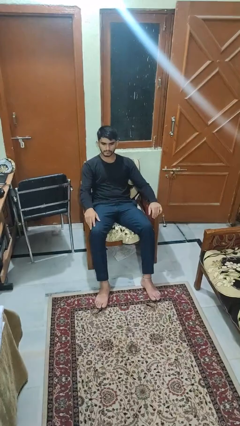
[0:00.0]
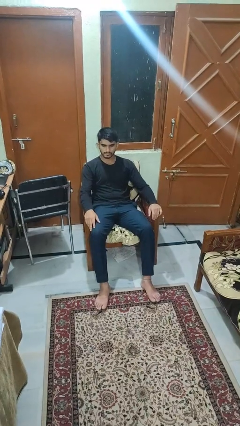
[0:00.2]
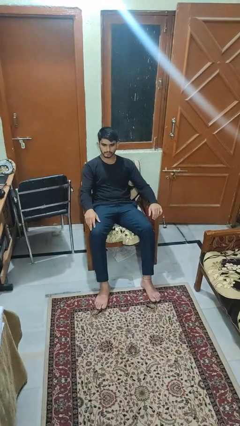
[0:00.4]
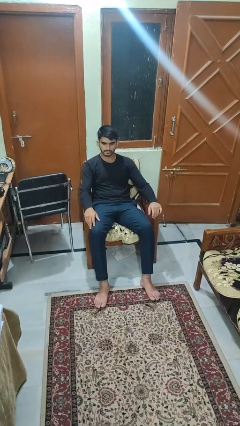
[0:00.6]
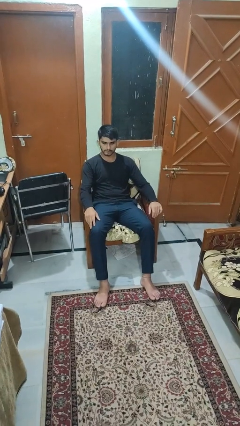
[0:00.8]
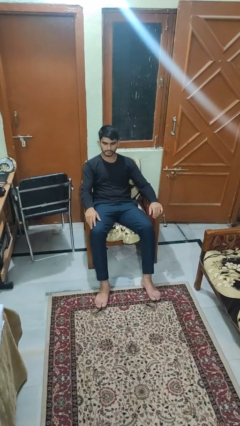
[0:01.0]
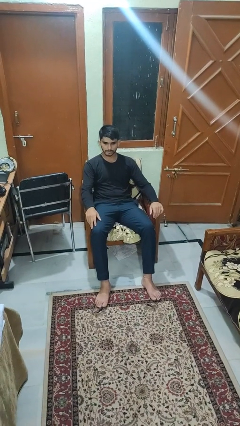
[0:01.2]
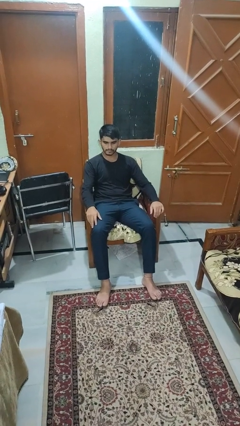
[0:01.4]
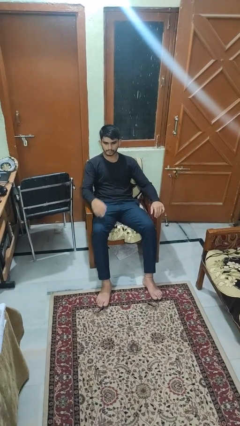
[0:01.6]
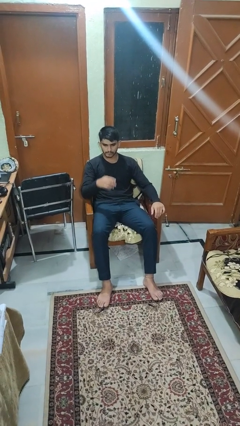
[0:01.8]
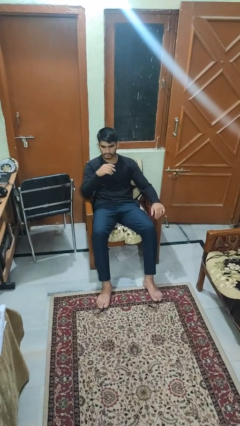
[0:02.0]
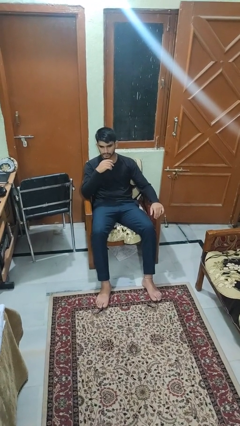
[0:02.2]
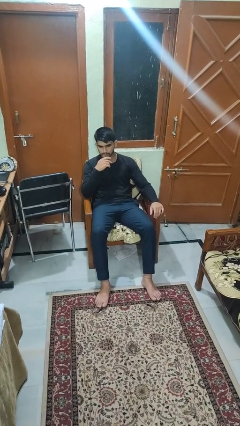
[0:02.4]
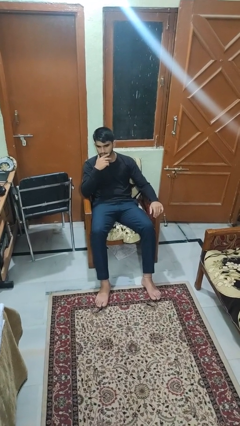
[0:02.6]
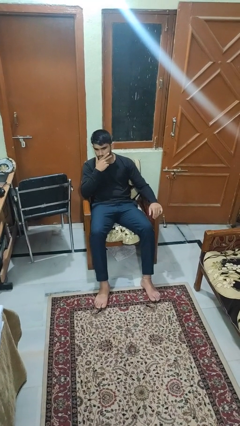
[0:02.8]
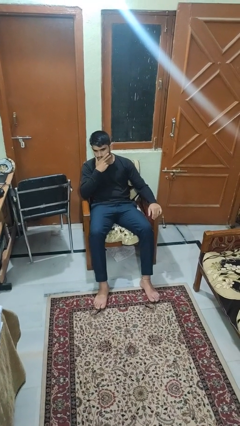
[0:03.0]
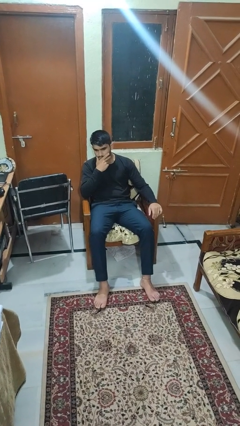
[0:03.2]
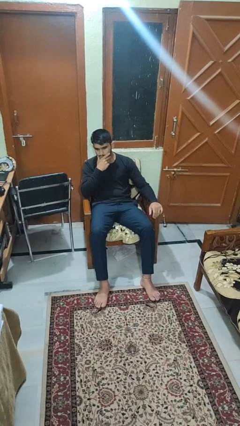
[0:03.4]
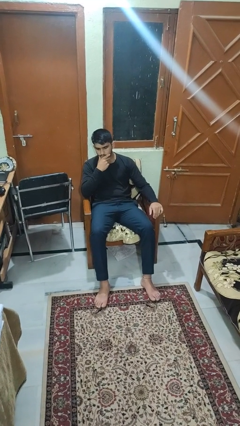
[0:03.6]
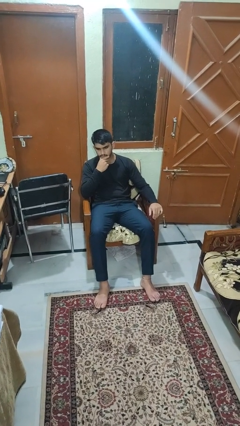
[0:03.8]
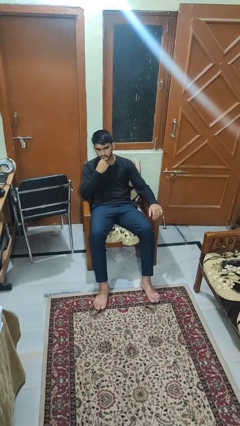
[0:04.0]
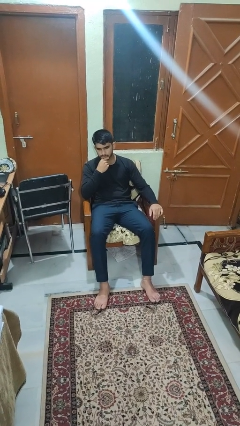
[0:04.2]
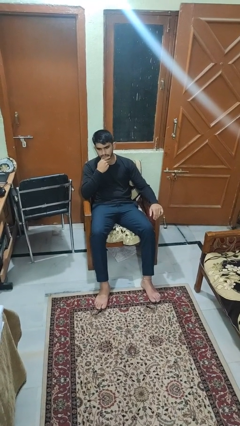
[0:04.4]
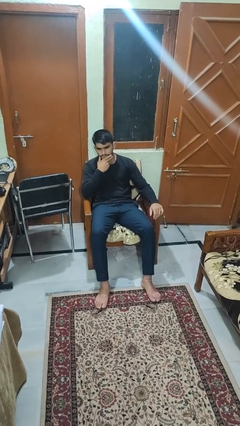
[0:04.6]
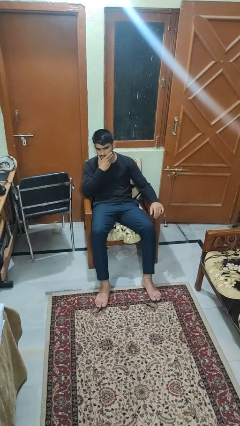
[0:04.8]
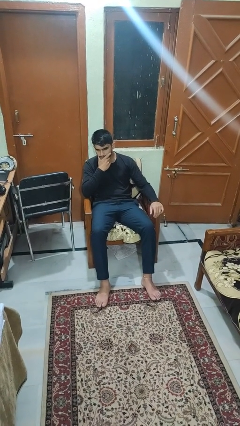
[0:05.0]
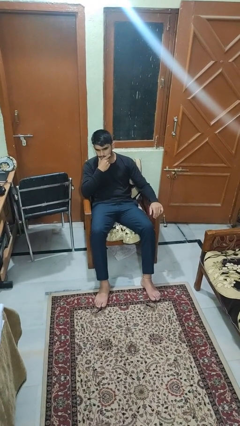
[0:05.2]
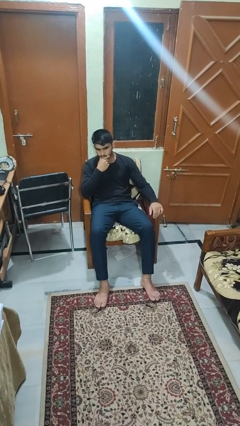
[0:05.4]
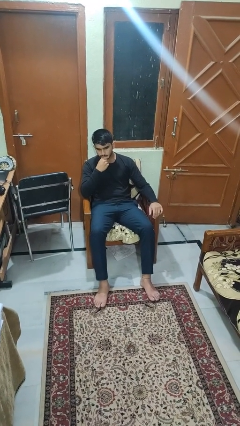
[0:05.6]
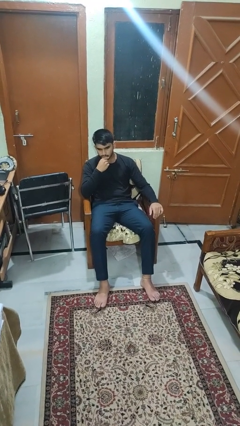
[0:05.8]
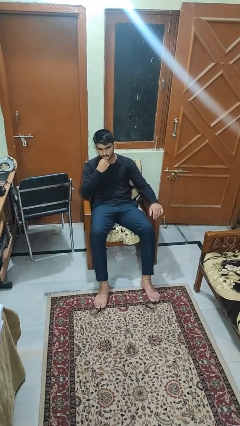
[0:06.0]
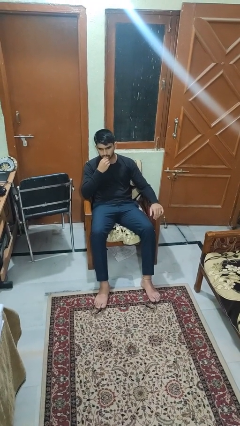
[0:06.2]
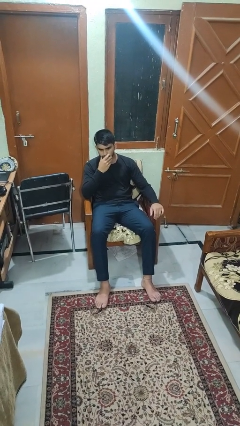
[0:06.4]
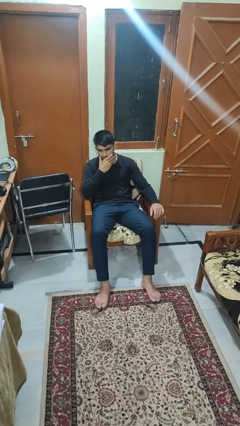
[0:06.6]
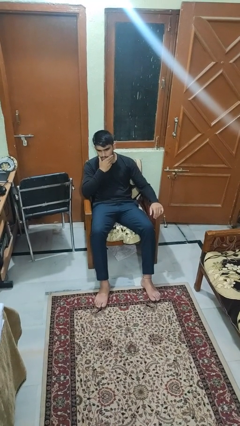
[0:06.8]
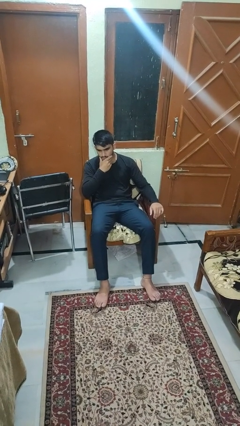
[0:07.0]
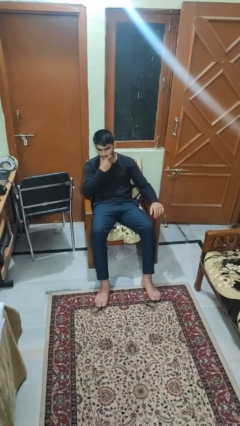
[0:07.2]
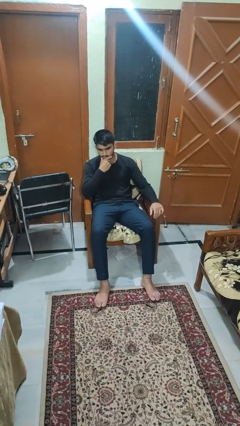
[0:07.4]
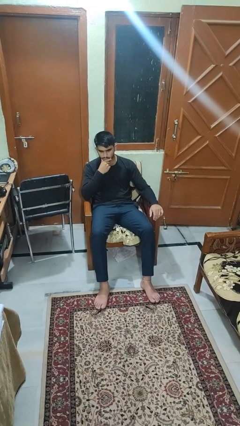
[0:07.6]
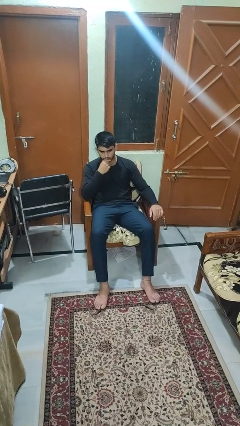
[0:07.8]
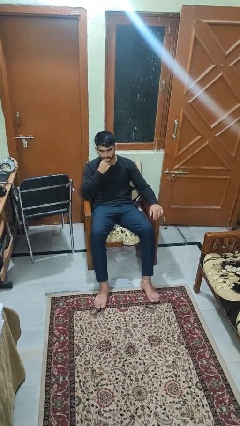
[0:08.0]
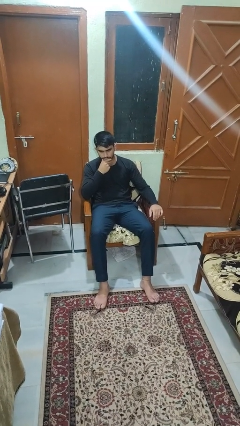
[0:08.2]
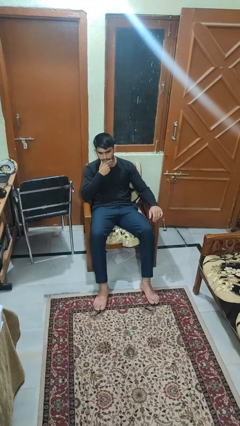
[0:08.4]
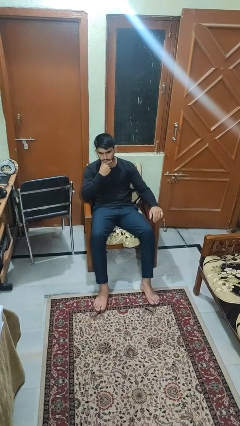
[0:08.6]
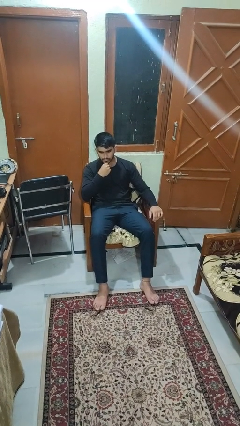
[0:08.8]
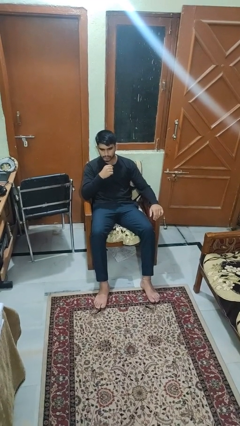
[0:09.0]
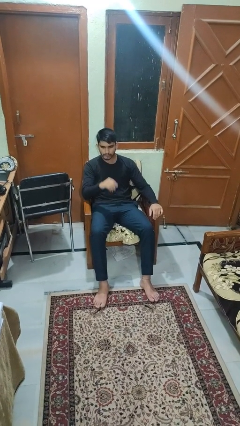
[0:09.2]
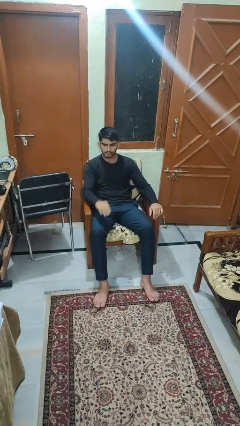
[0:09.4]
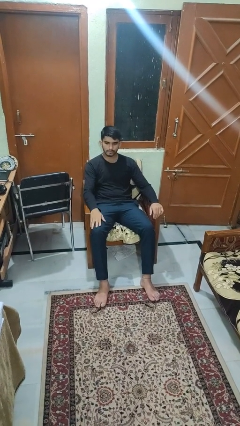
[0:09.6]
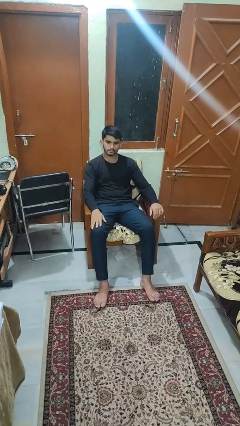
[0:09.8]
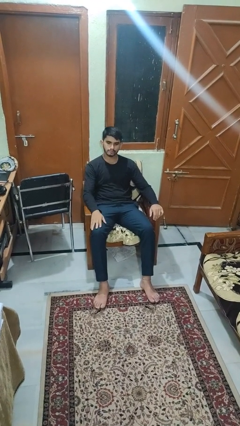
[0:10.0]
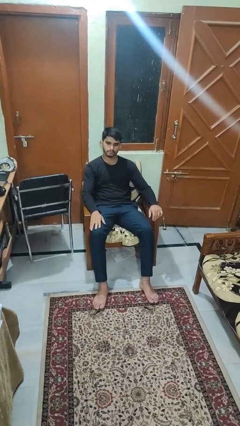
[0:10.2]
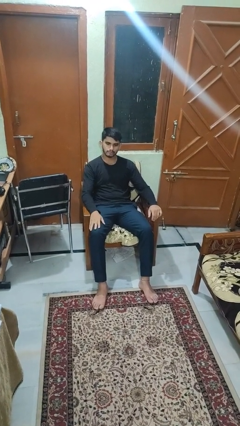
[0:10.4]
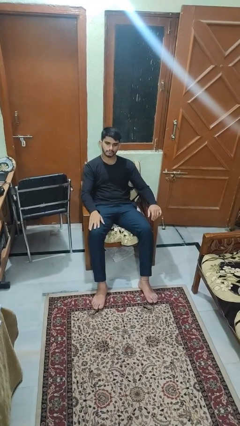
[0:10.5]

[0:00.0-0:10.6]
person strokes chin

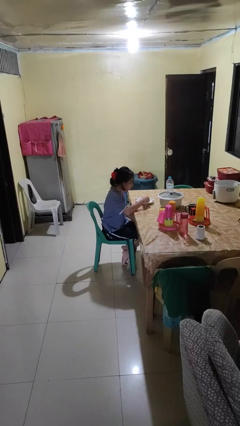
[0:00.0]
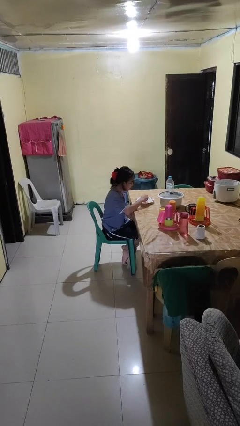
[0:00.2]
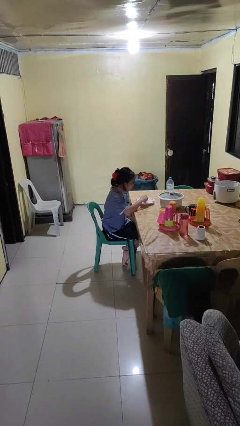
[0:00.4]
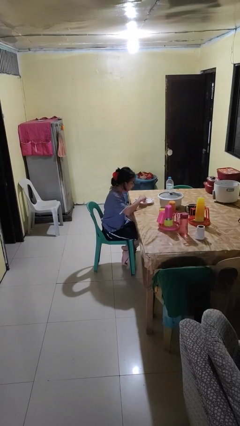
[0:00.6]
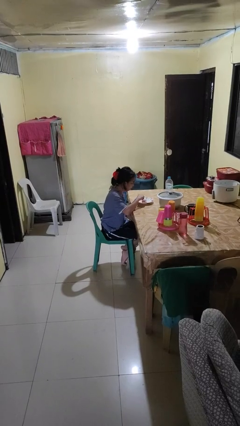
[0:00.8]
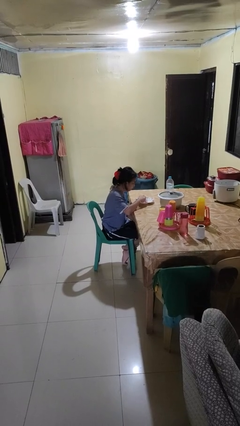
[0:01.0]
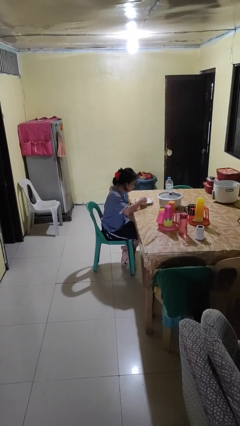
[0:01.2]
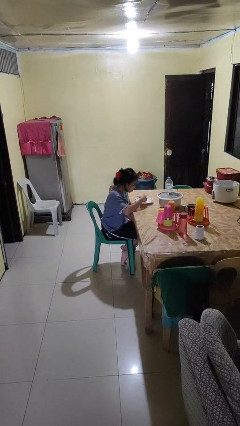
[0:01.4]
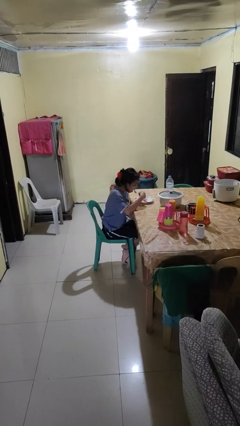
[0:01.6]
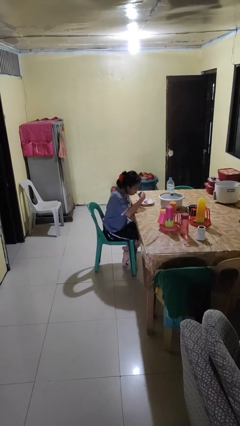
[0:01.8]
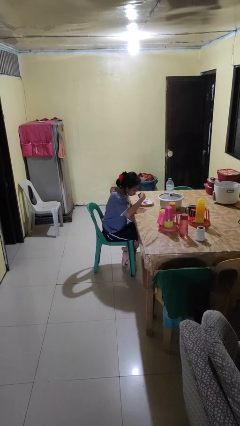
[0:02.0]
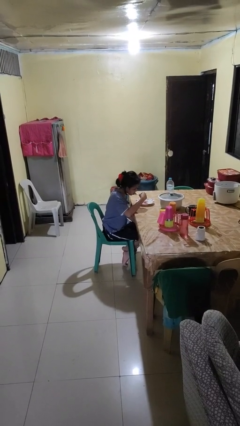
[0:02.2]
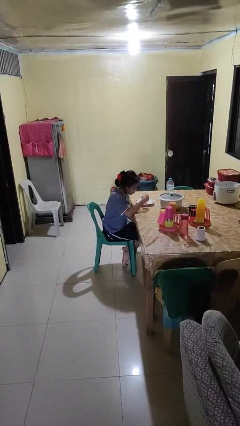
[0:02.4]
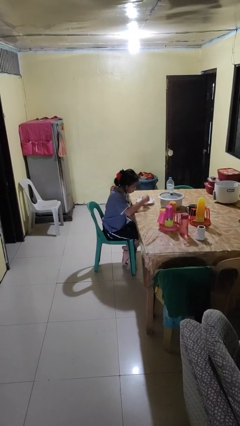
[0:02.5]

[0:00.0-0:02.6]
person eats with utensil

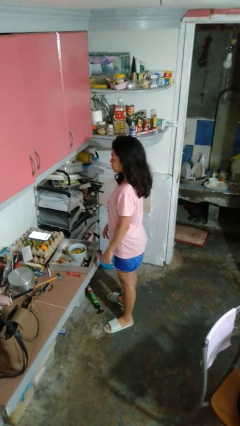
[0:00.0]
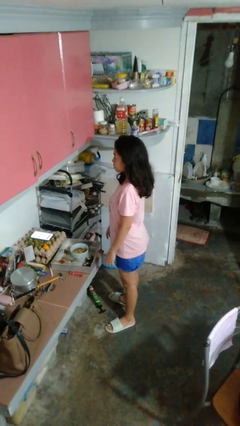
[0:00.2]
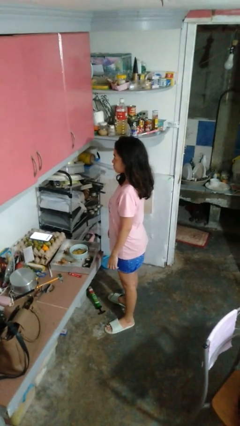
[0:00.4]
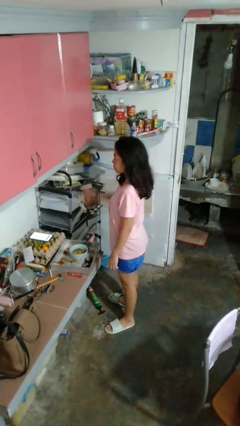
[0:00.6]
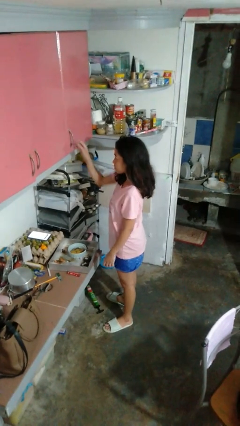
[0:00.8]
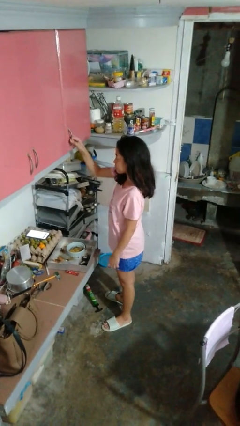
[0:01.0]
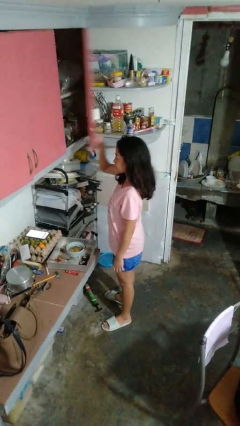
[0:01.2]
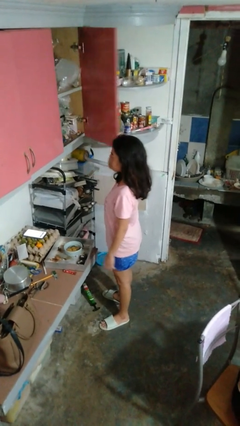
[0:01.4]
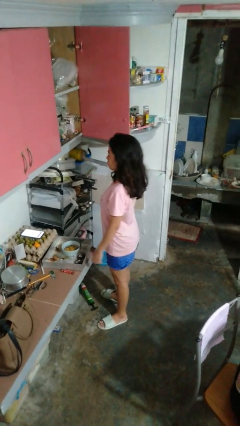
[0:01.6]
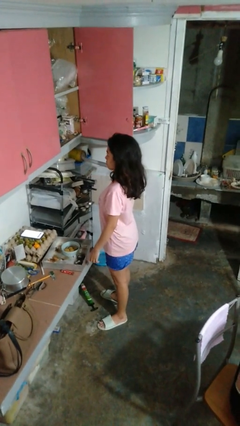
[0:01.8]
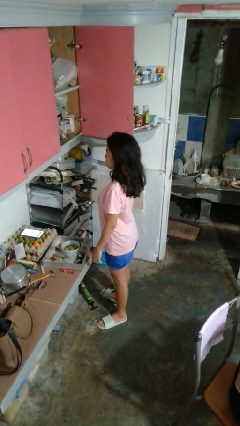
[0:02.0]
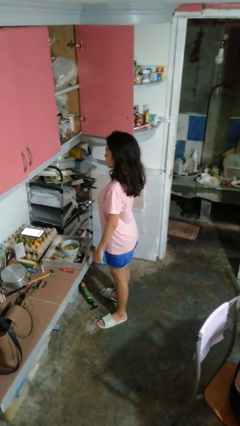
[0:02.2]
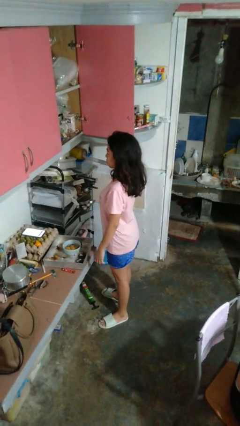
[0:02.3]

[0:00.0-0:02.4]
person opens cabinet

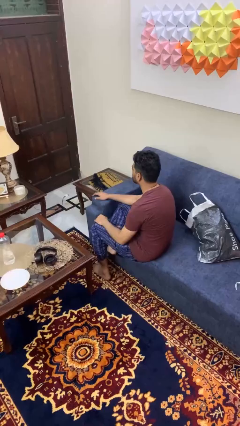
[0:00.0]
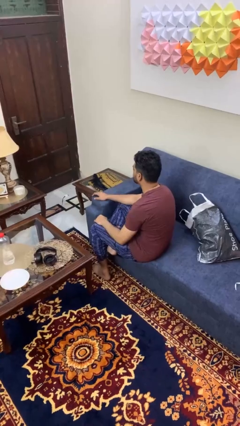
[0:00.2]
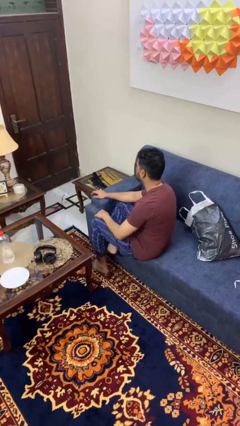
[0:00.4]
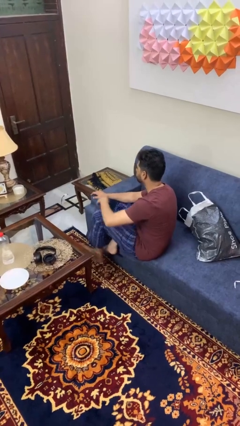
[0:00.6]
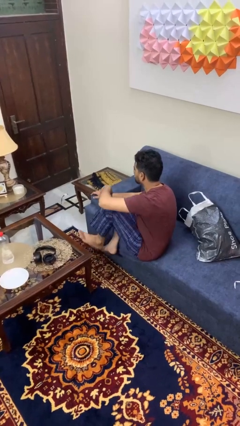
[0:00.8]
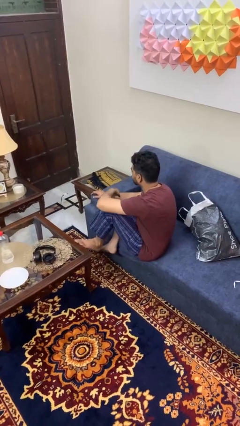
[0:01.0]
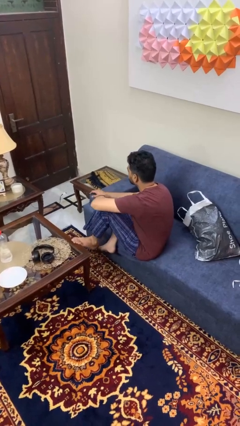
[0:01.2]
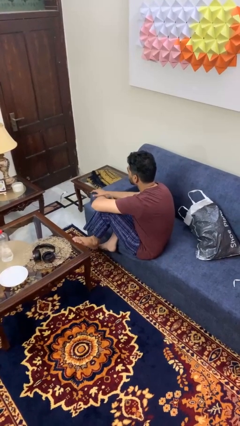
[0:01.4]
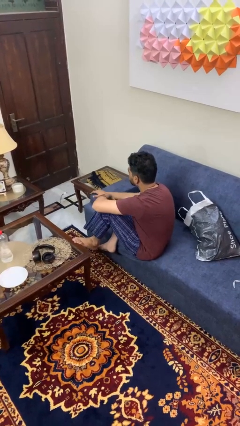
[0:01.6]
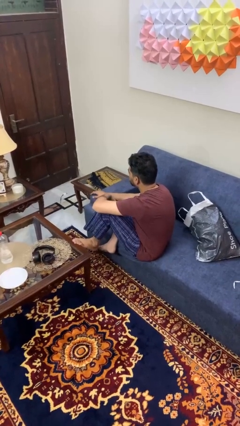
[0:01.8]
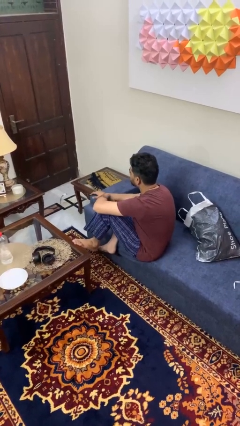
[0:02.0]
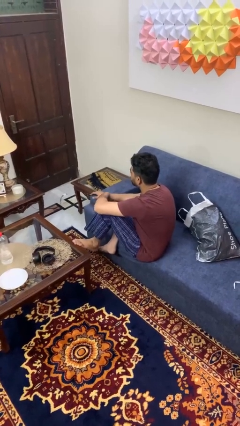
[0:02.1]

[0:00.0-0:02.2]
person puts feet up
